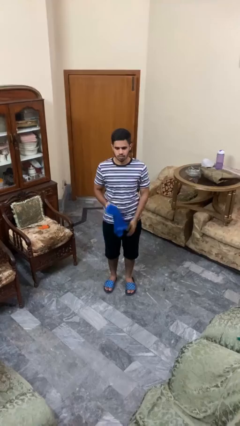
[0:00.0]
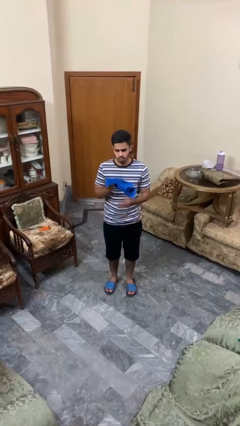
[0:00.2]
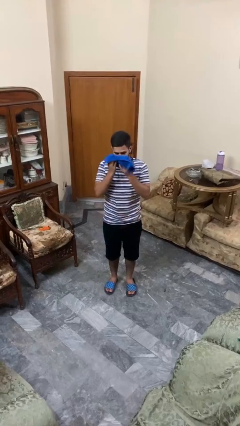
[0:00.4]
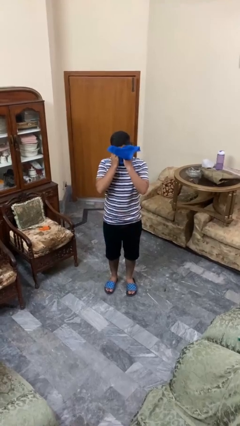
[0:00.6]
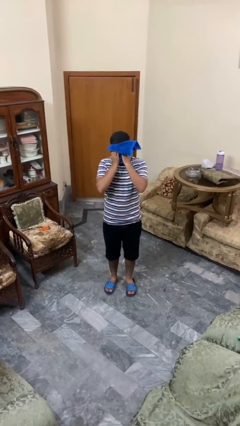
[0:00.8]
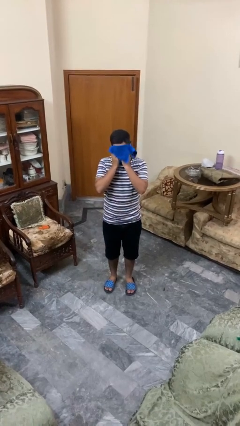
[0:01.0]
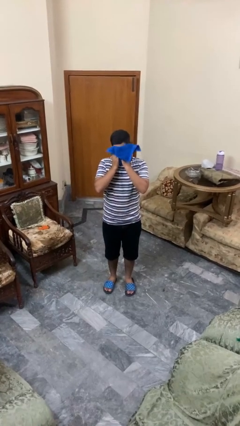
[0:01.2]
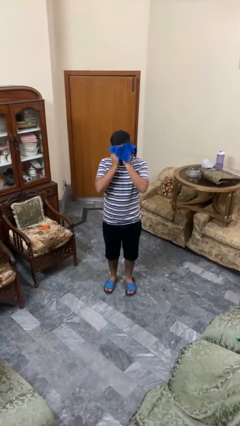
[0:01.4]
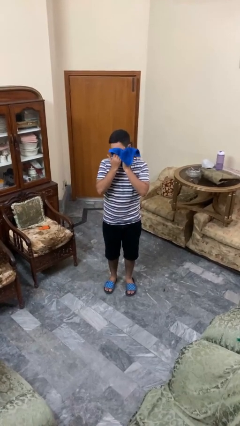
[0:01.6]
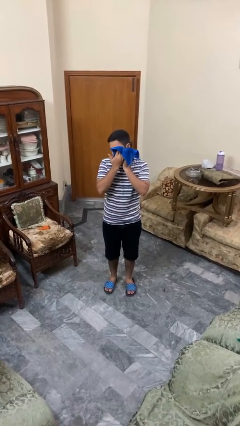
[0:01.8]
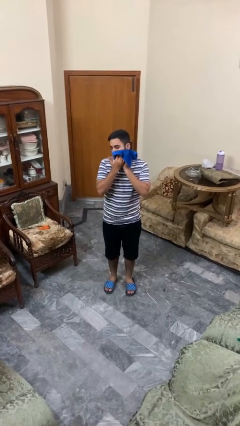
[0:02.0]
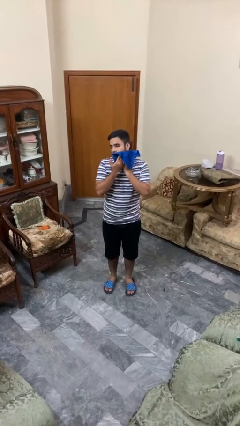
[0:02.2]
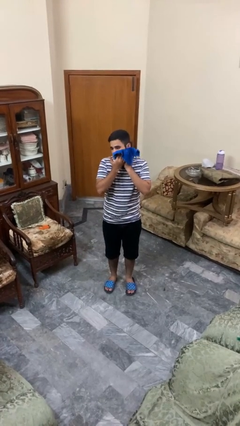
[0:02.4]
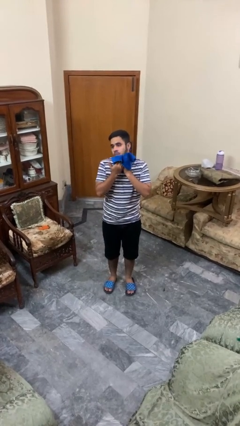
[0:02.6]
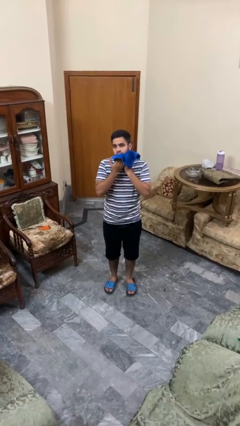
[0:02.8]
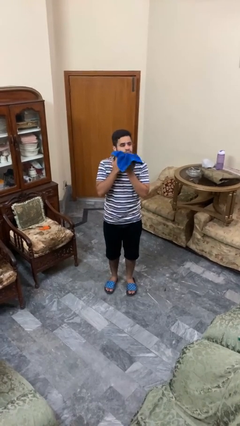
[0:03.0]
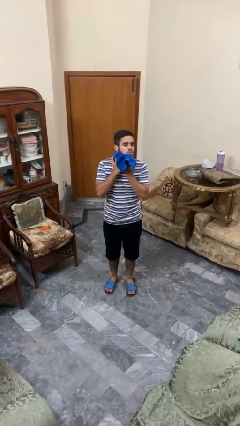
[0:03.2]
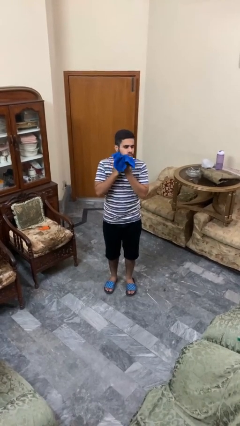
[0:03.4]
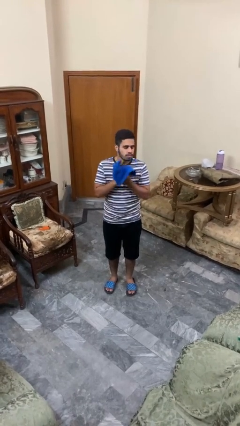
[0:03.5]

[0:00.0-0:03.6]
person wipes mouth with napkin

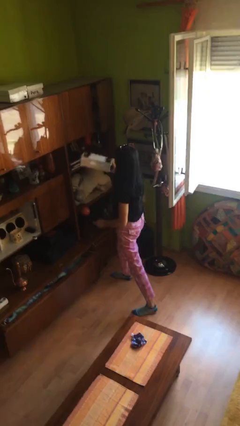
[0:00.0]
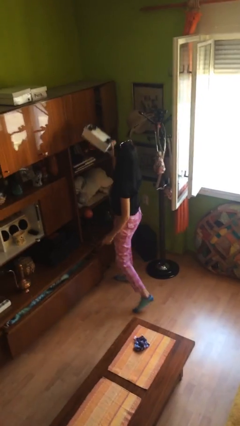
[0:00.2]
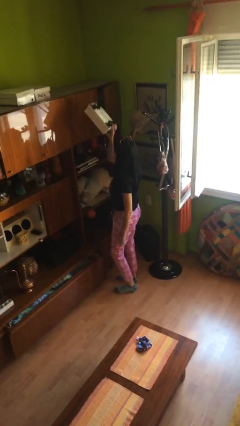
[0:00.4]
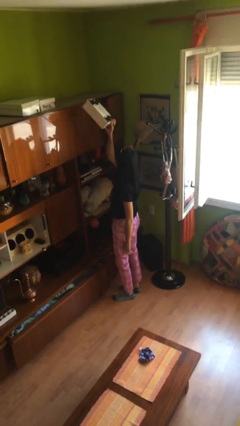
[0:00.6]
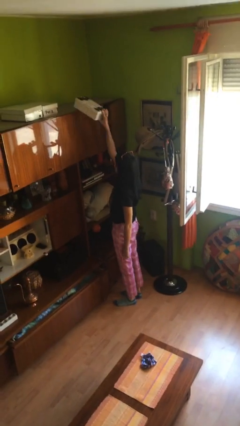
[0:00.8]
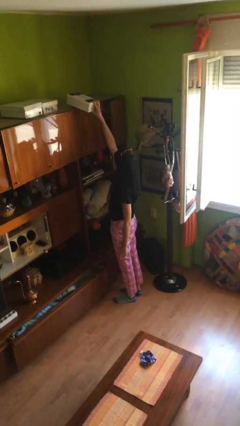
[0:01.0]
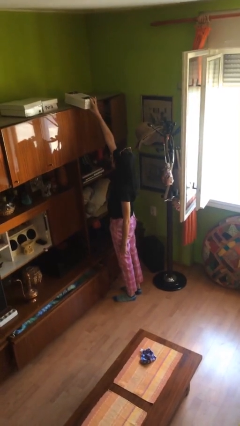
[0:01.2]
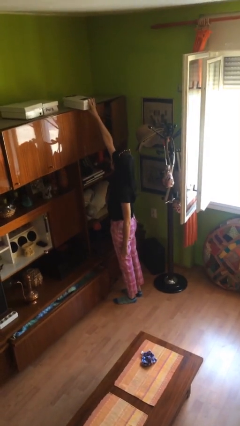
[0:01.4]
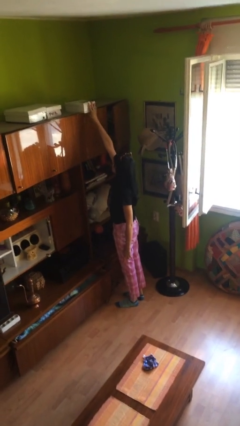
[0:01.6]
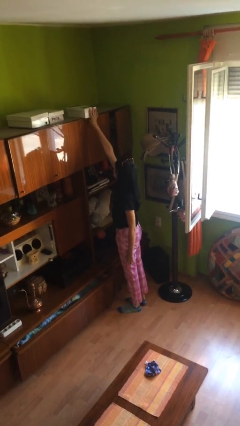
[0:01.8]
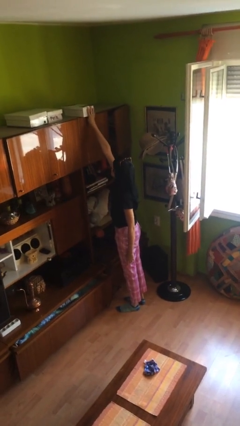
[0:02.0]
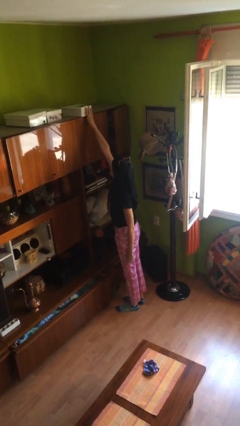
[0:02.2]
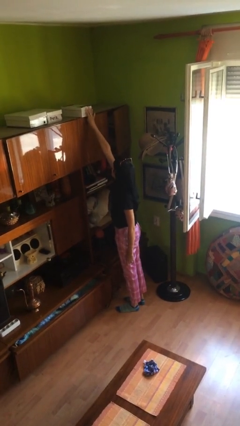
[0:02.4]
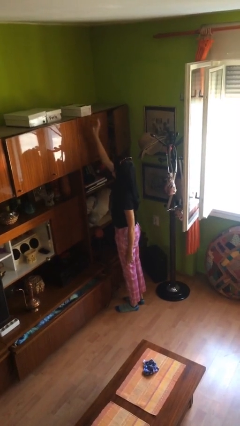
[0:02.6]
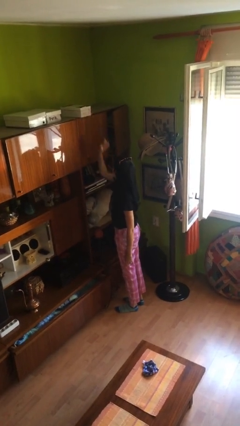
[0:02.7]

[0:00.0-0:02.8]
person puts down object on shelf

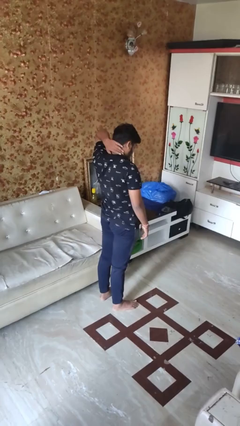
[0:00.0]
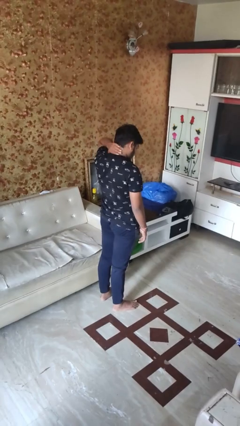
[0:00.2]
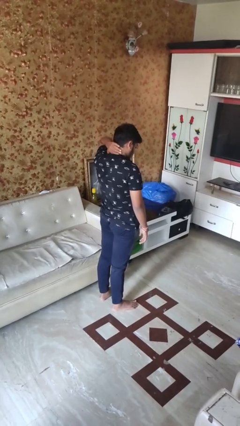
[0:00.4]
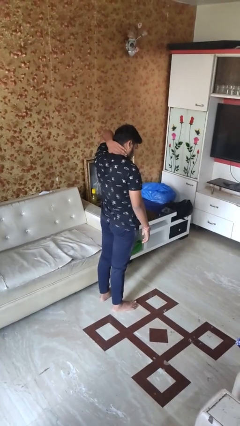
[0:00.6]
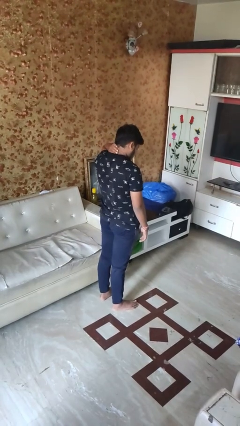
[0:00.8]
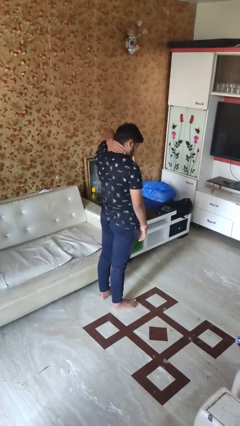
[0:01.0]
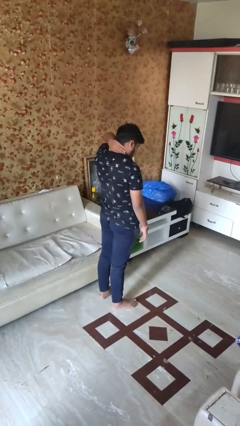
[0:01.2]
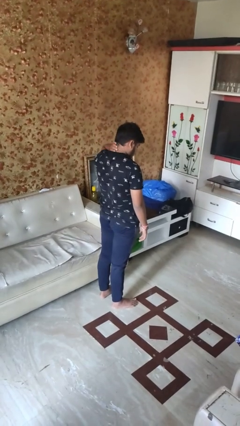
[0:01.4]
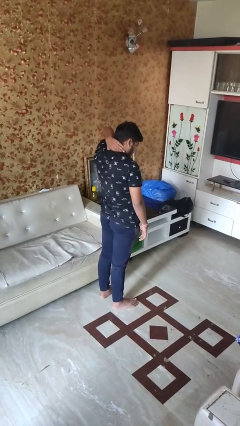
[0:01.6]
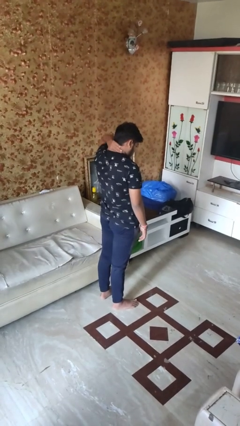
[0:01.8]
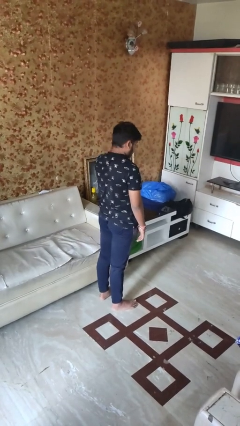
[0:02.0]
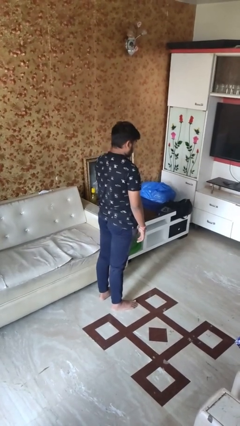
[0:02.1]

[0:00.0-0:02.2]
person rubs neck

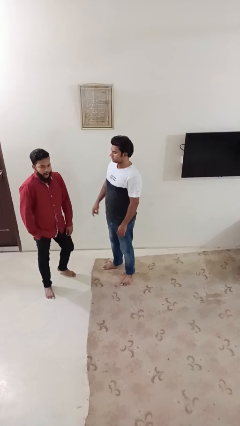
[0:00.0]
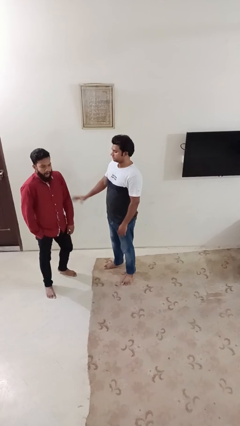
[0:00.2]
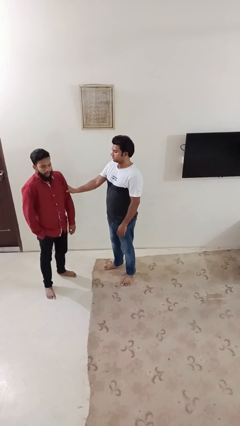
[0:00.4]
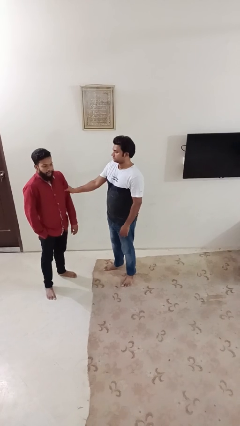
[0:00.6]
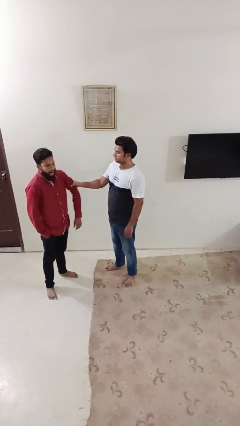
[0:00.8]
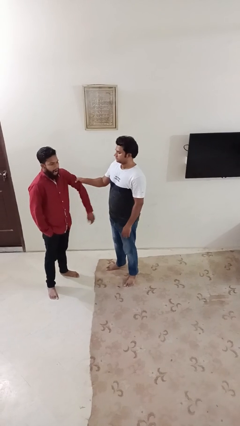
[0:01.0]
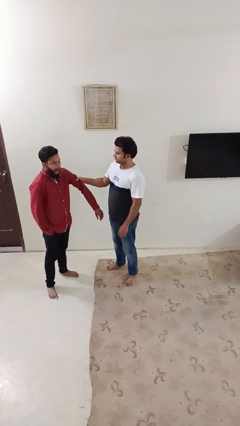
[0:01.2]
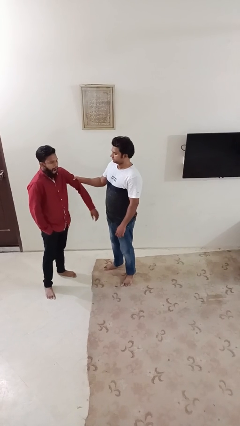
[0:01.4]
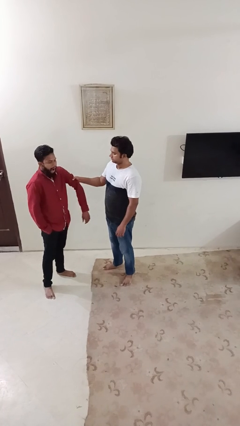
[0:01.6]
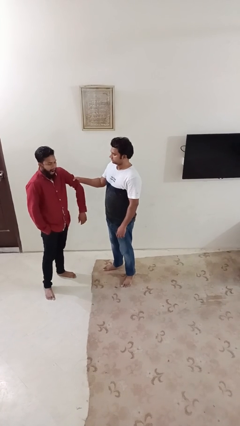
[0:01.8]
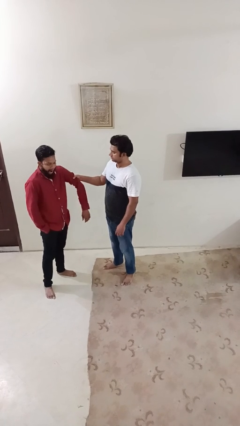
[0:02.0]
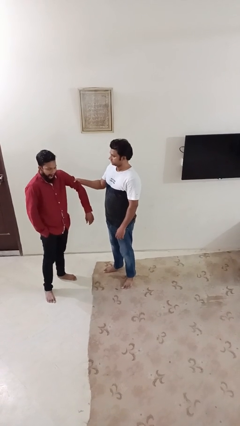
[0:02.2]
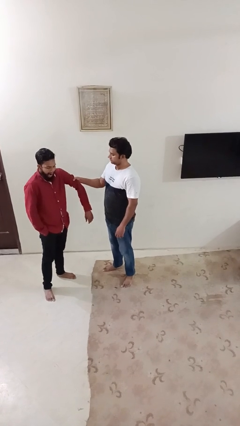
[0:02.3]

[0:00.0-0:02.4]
person grabs person by bicep

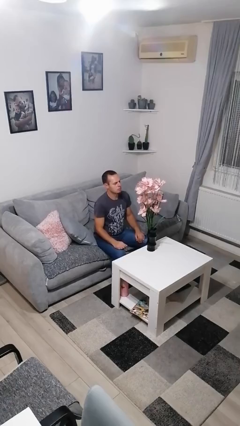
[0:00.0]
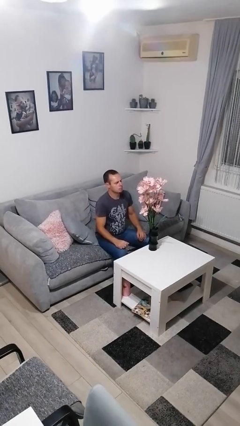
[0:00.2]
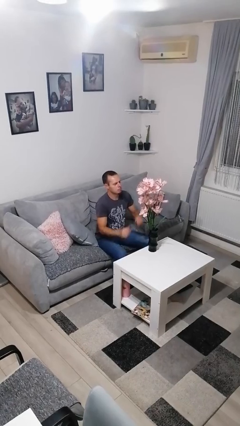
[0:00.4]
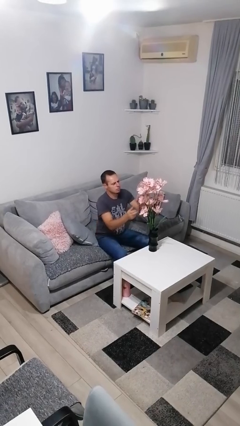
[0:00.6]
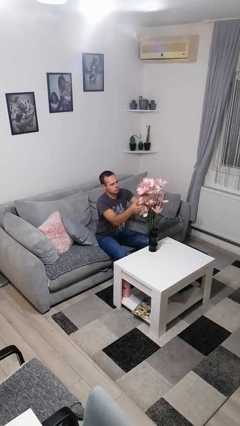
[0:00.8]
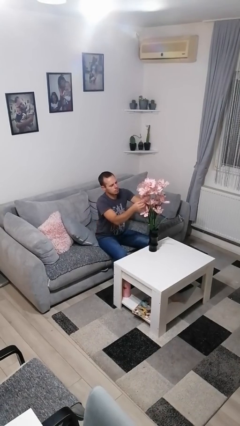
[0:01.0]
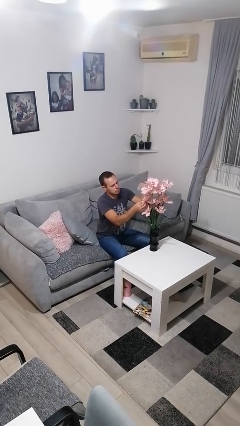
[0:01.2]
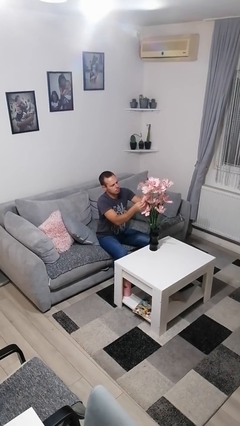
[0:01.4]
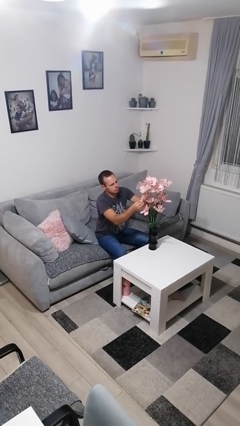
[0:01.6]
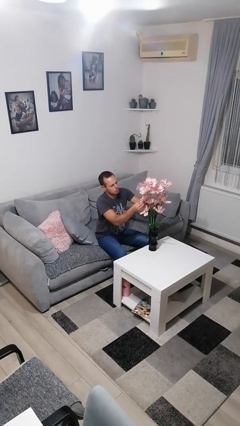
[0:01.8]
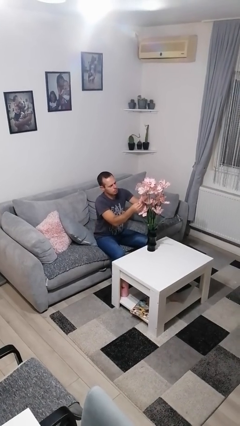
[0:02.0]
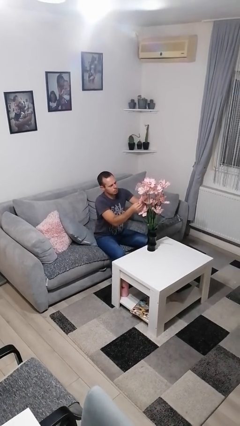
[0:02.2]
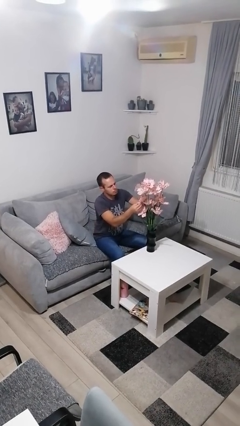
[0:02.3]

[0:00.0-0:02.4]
person arranges flowers in vase

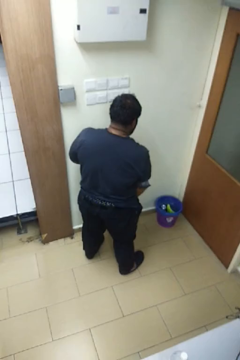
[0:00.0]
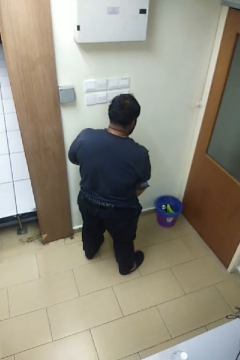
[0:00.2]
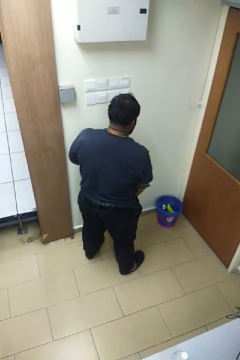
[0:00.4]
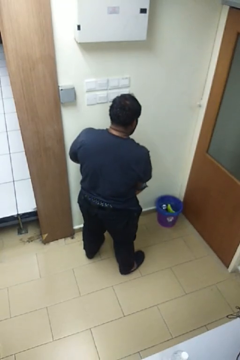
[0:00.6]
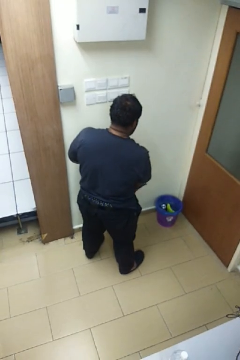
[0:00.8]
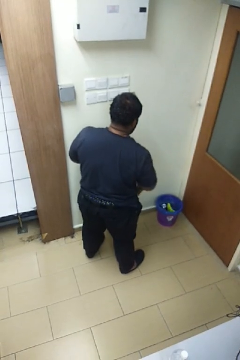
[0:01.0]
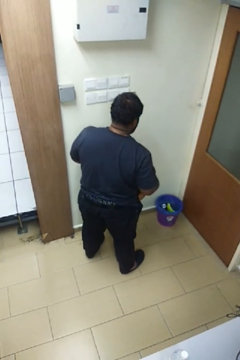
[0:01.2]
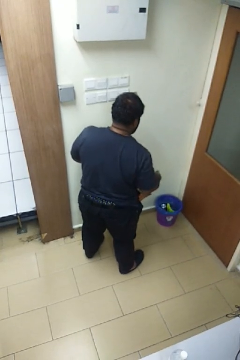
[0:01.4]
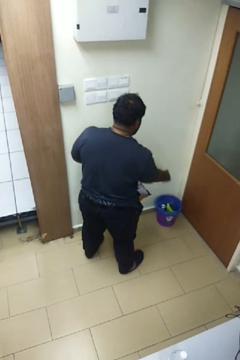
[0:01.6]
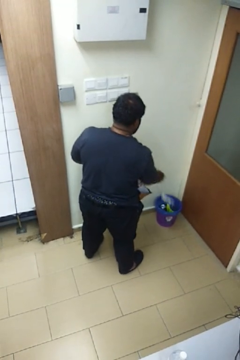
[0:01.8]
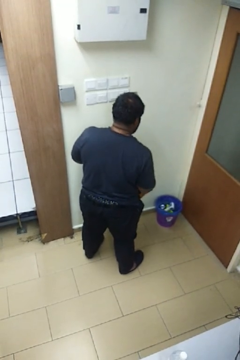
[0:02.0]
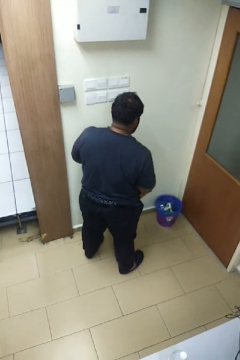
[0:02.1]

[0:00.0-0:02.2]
person discards trash

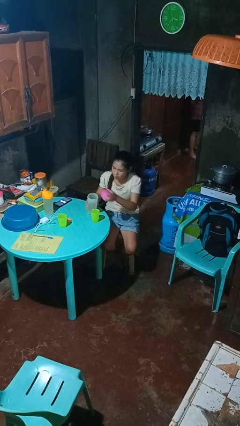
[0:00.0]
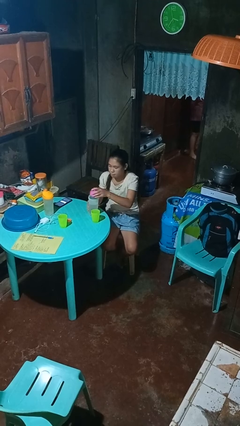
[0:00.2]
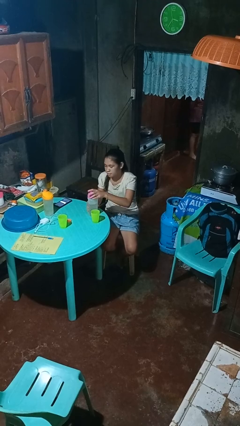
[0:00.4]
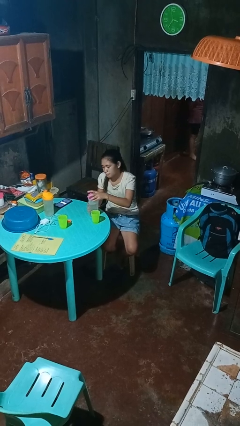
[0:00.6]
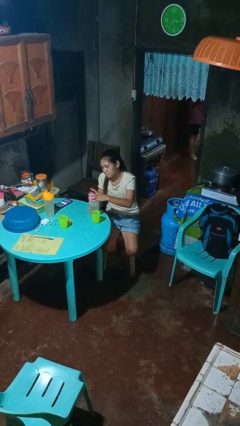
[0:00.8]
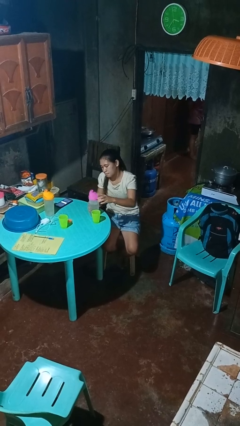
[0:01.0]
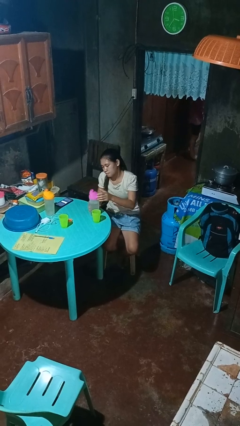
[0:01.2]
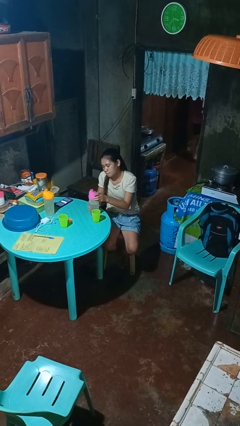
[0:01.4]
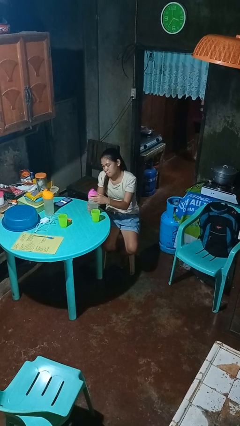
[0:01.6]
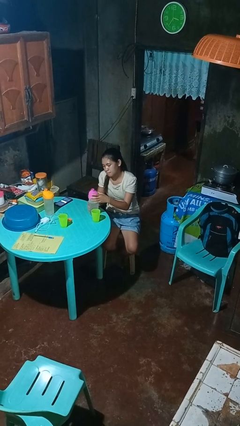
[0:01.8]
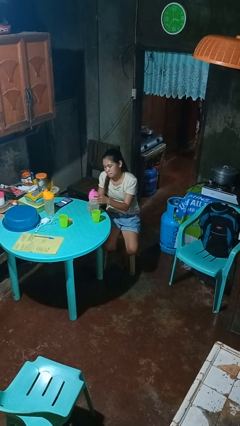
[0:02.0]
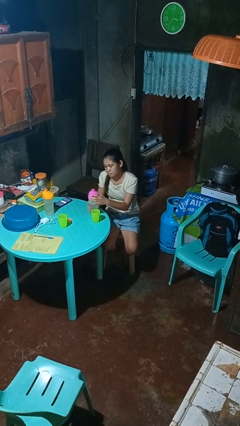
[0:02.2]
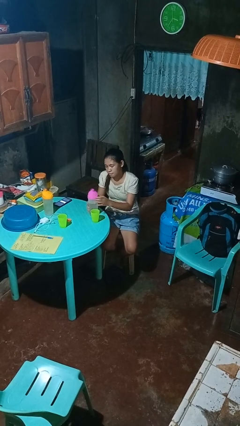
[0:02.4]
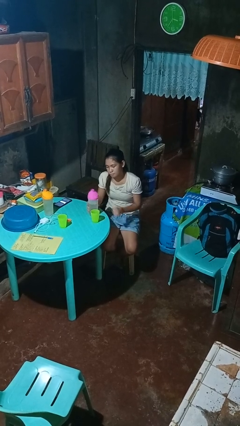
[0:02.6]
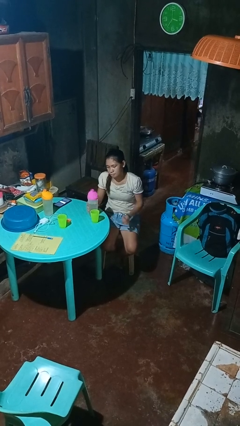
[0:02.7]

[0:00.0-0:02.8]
person screws lid to bottle
